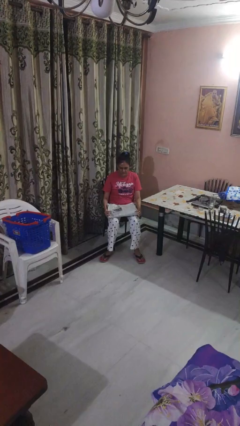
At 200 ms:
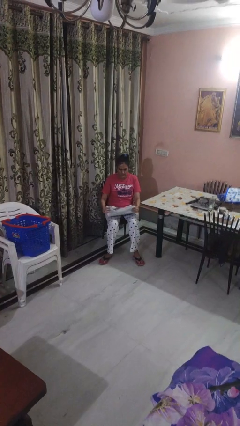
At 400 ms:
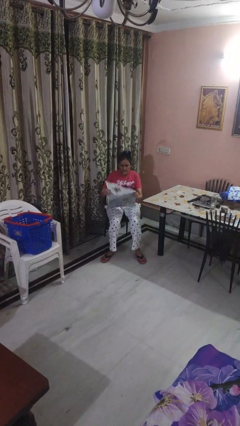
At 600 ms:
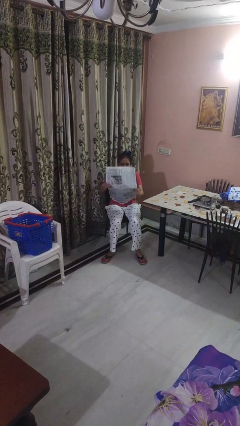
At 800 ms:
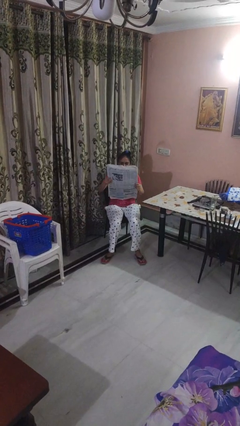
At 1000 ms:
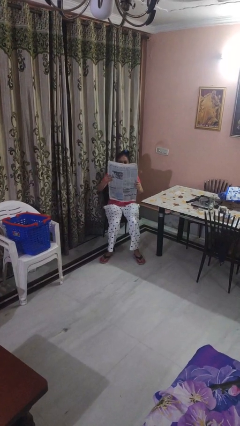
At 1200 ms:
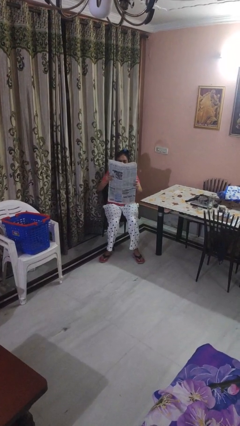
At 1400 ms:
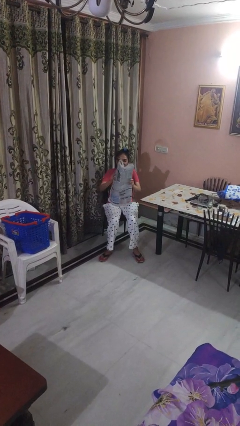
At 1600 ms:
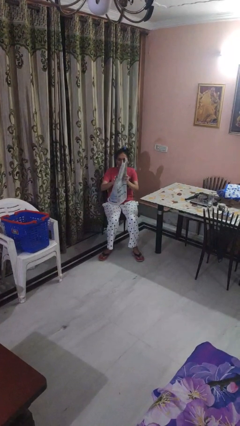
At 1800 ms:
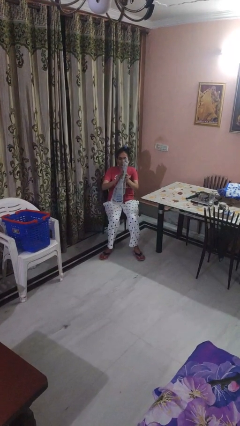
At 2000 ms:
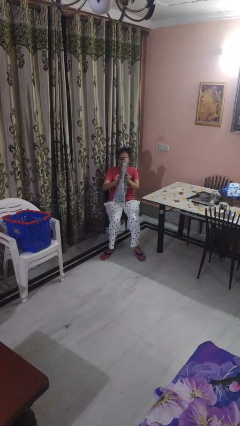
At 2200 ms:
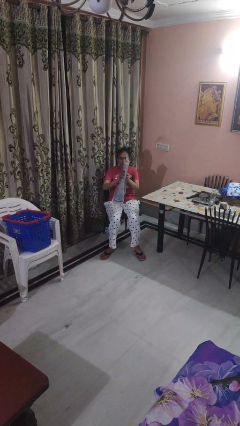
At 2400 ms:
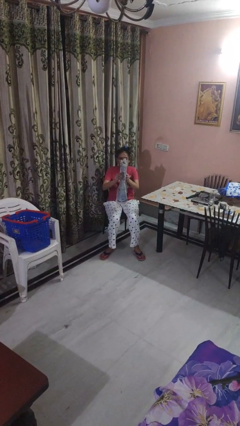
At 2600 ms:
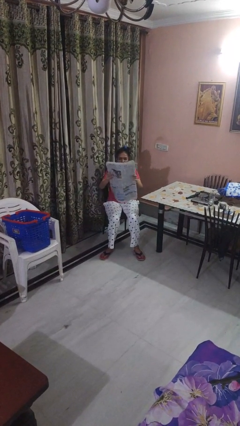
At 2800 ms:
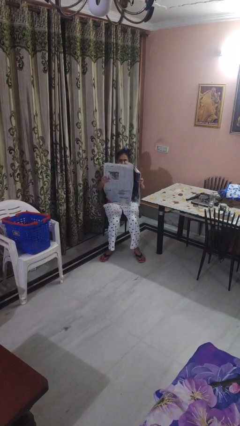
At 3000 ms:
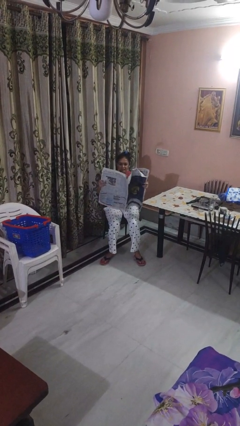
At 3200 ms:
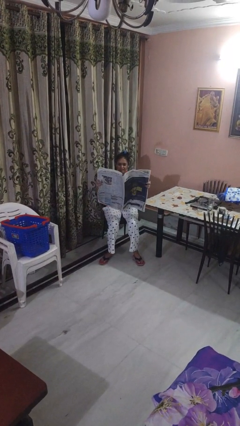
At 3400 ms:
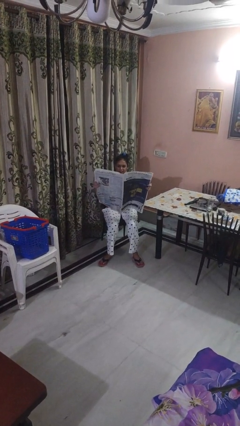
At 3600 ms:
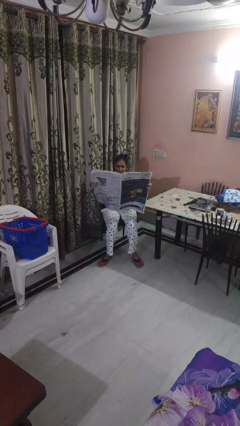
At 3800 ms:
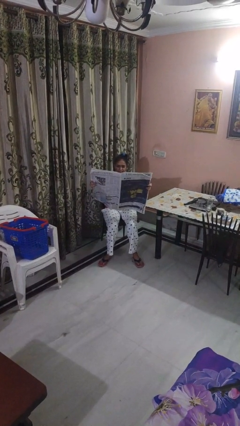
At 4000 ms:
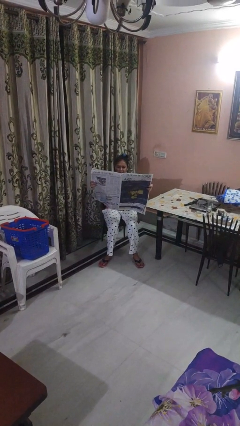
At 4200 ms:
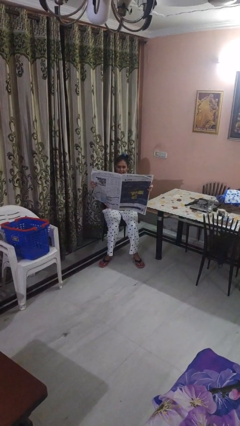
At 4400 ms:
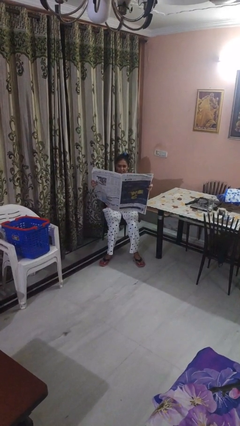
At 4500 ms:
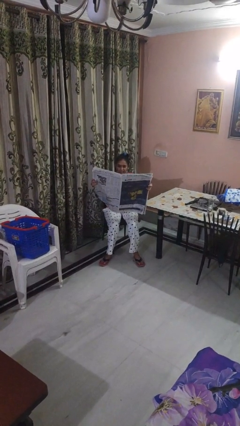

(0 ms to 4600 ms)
person reads newspaper

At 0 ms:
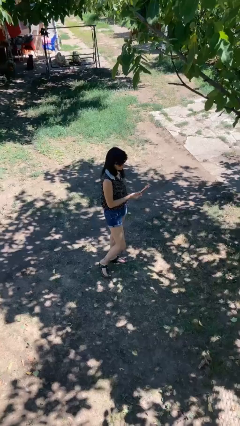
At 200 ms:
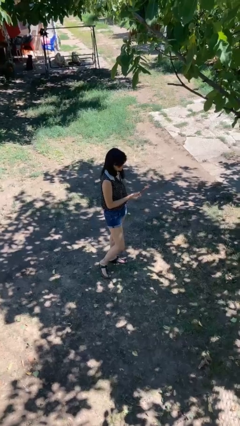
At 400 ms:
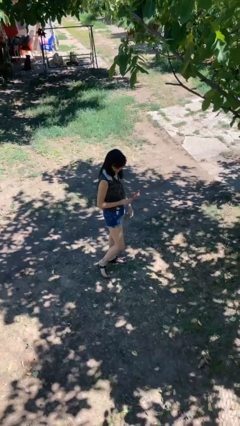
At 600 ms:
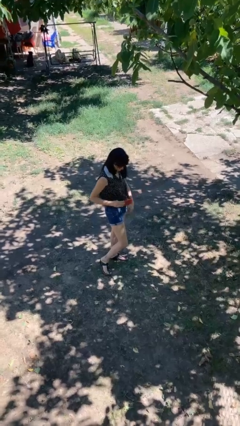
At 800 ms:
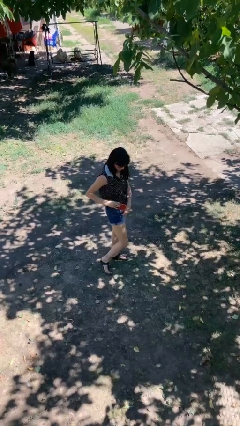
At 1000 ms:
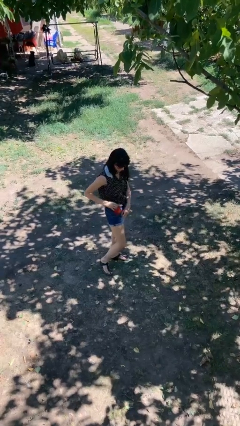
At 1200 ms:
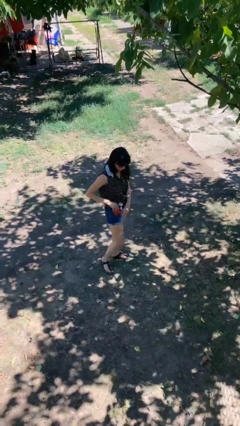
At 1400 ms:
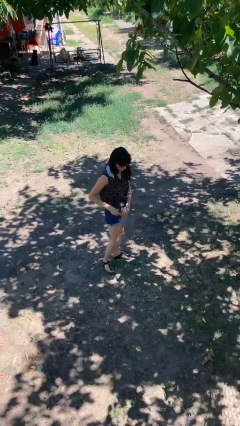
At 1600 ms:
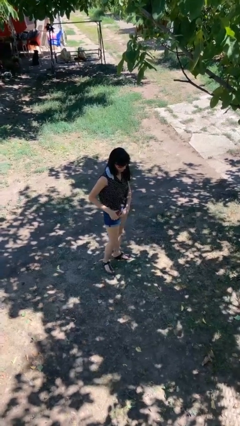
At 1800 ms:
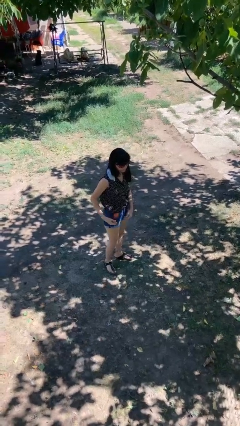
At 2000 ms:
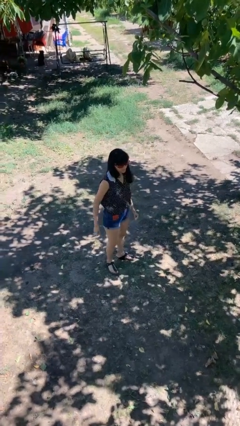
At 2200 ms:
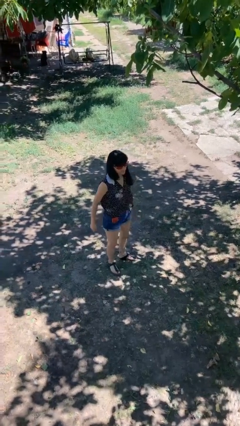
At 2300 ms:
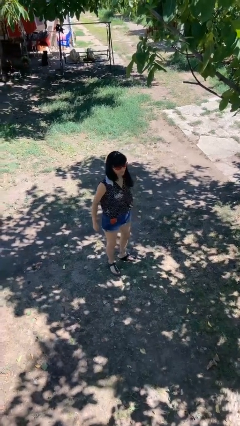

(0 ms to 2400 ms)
person puts phone into pocket

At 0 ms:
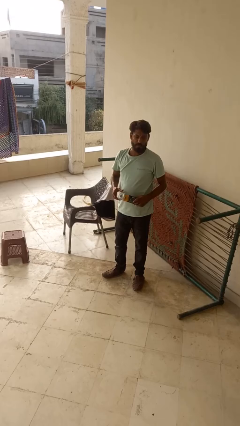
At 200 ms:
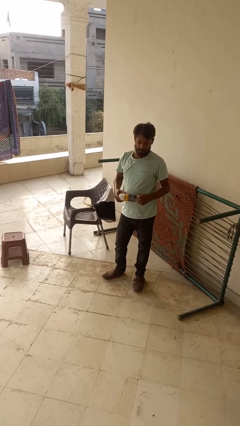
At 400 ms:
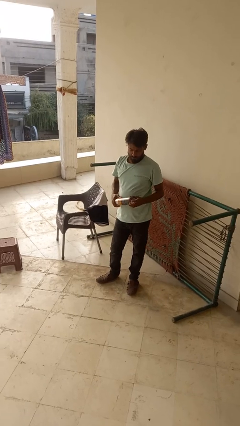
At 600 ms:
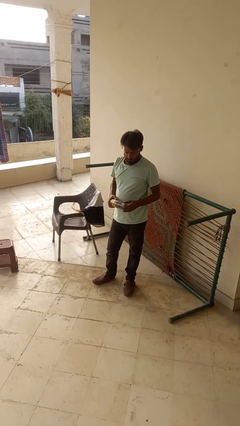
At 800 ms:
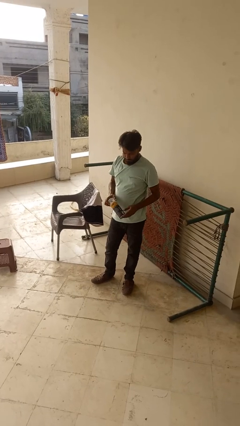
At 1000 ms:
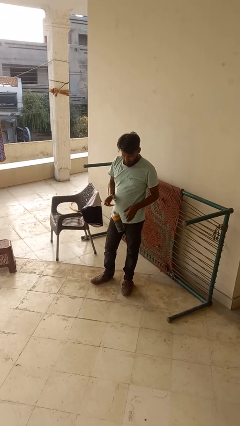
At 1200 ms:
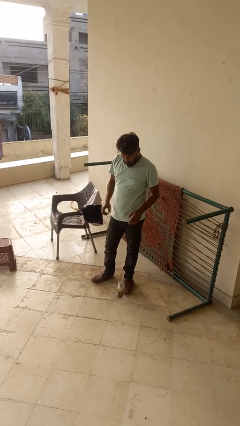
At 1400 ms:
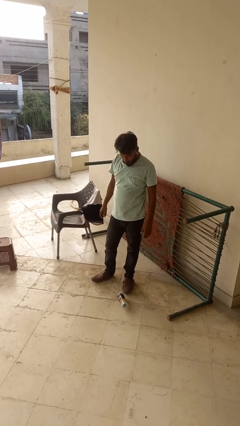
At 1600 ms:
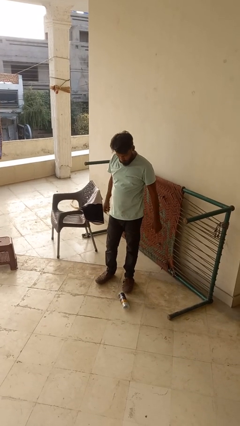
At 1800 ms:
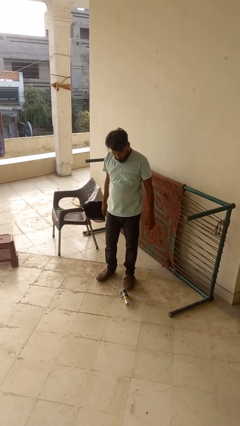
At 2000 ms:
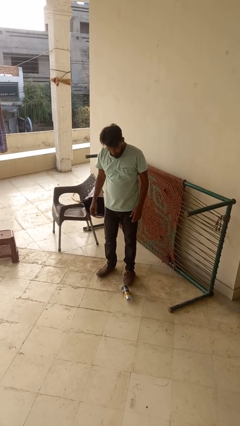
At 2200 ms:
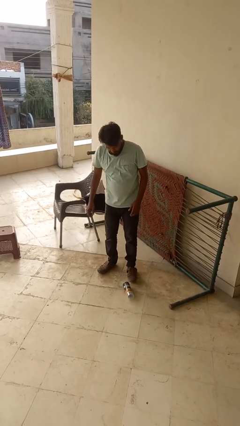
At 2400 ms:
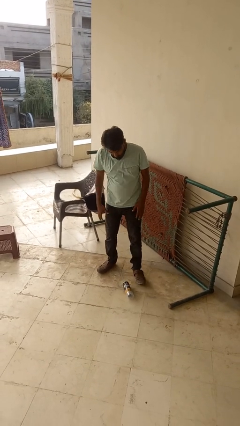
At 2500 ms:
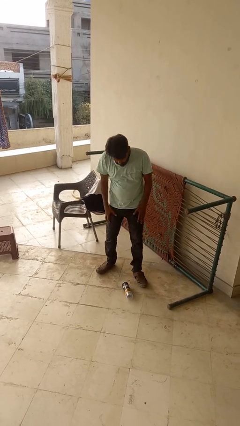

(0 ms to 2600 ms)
person drops object

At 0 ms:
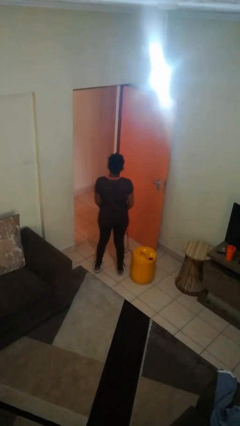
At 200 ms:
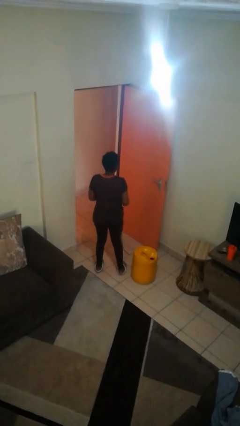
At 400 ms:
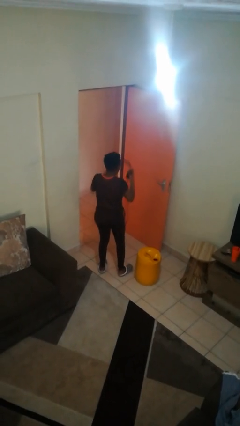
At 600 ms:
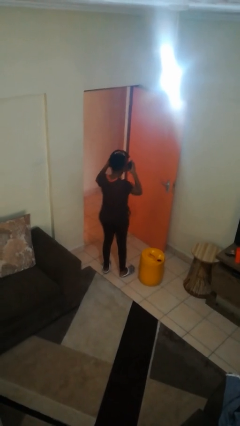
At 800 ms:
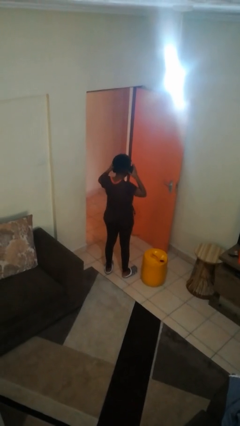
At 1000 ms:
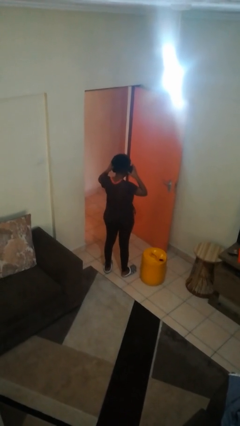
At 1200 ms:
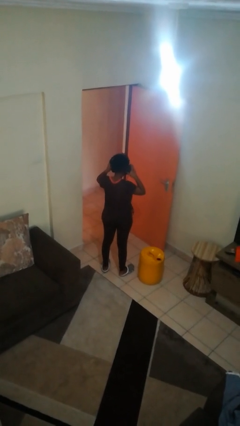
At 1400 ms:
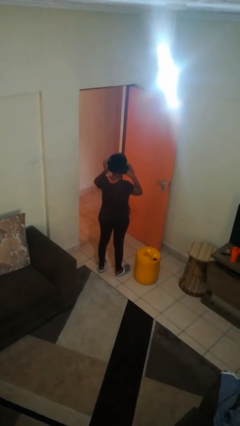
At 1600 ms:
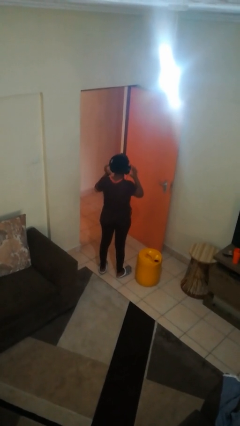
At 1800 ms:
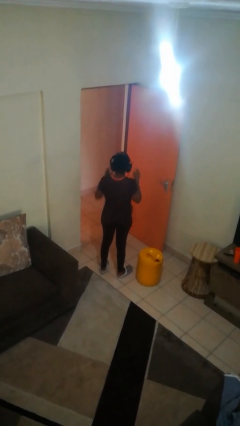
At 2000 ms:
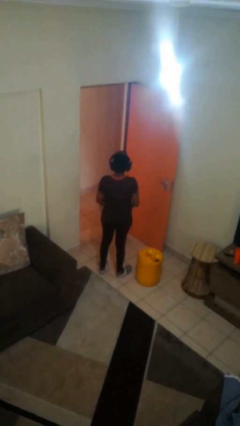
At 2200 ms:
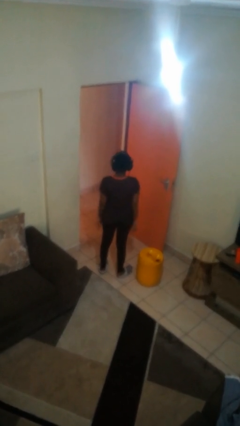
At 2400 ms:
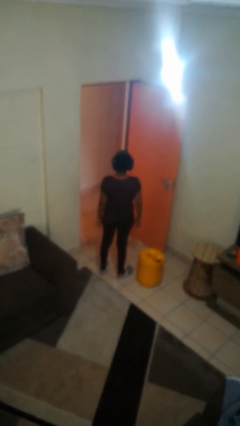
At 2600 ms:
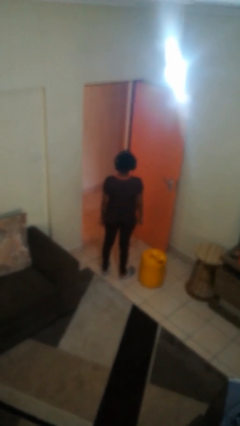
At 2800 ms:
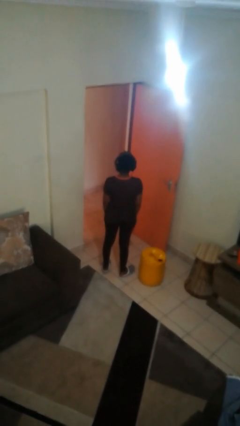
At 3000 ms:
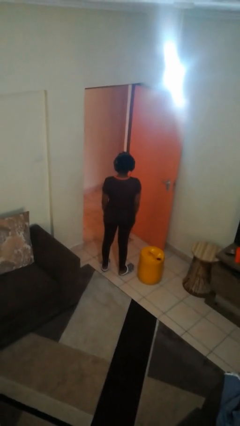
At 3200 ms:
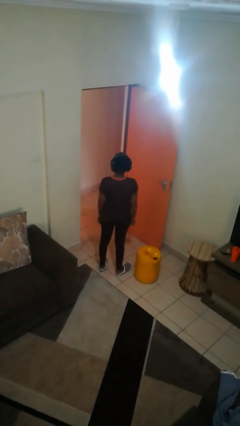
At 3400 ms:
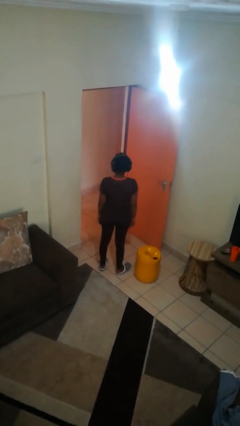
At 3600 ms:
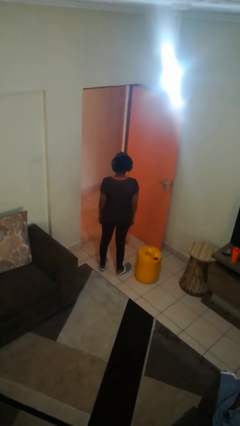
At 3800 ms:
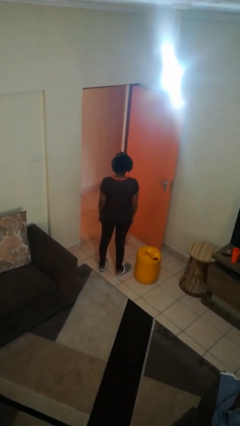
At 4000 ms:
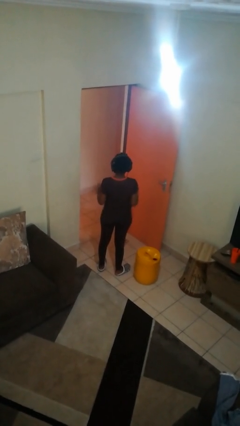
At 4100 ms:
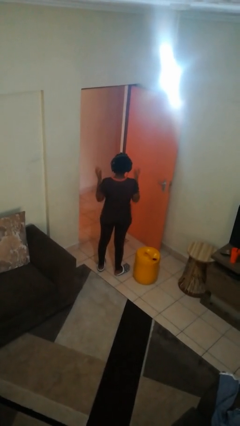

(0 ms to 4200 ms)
person puts on headphones

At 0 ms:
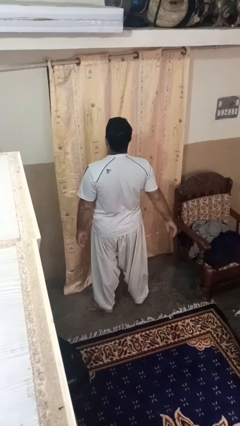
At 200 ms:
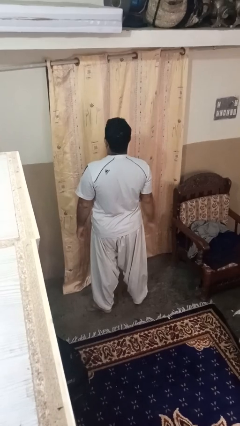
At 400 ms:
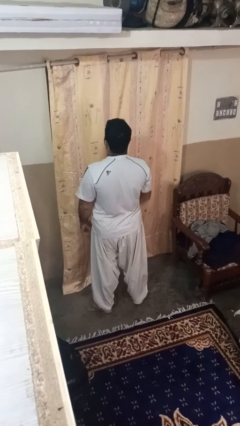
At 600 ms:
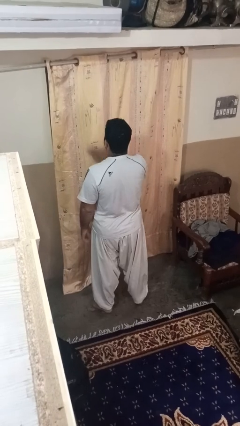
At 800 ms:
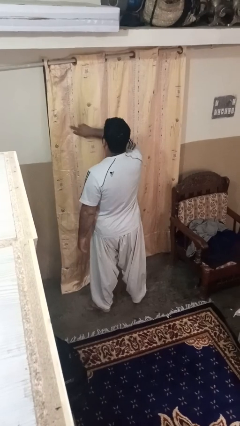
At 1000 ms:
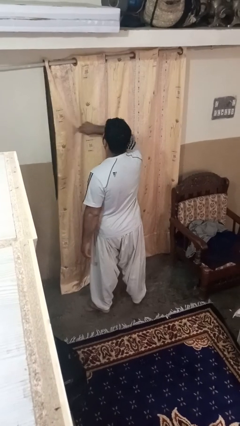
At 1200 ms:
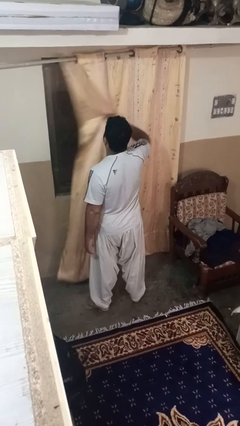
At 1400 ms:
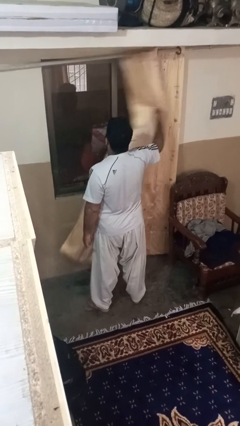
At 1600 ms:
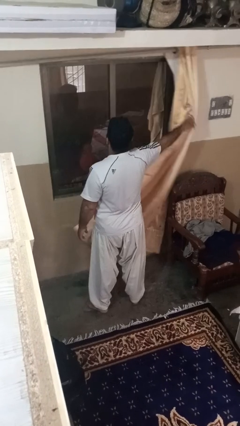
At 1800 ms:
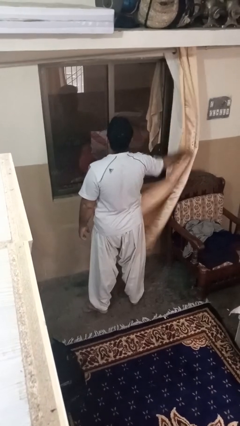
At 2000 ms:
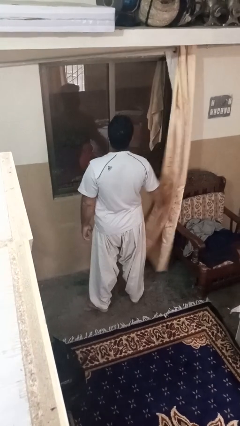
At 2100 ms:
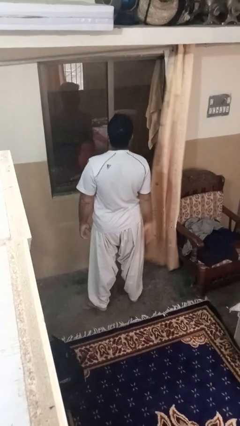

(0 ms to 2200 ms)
person opens curtains

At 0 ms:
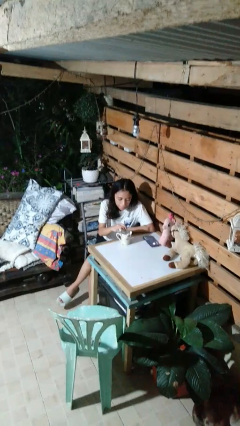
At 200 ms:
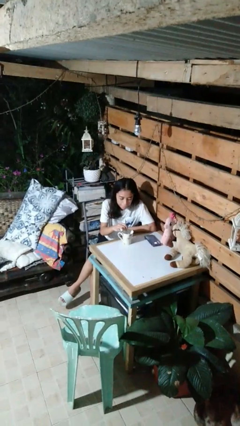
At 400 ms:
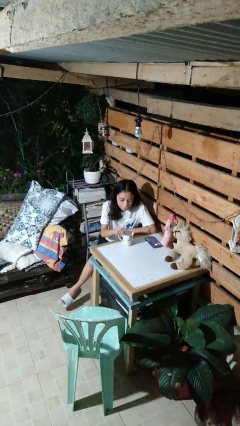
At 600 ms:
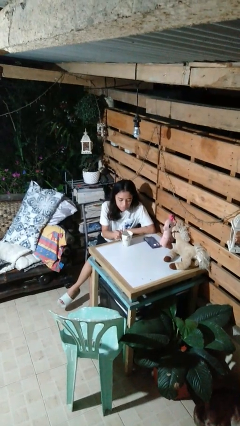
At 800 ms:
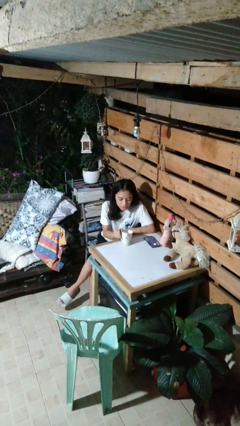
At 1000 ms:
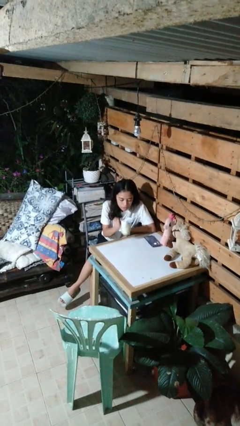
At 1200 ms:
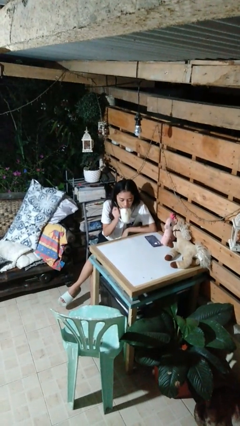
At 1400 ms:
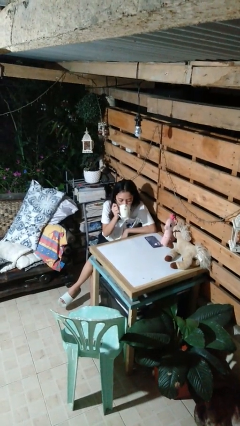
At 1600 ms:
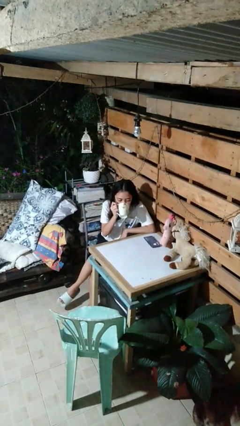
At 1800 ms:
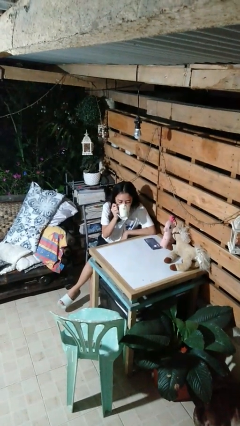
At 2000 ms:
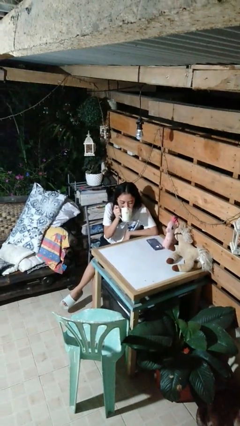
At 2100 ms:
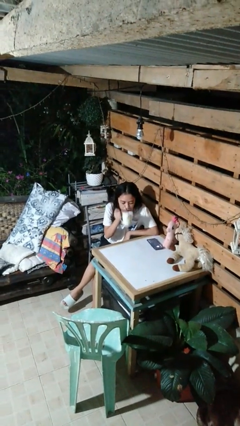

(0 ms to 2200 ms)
person drinks from mug
